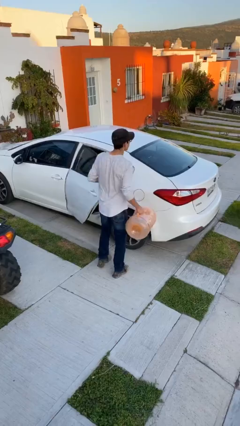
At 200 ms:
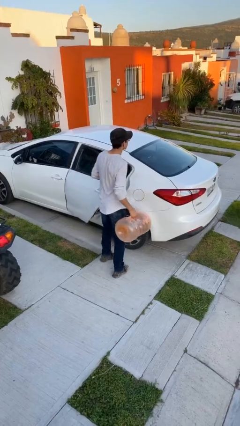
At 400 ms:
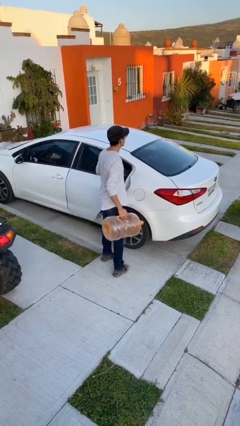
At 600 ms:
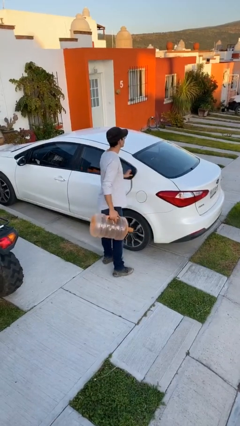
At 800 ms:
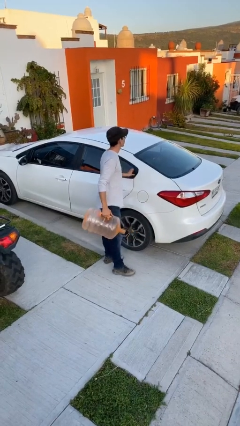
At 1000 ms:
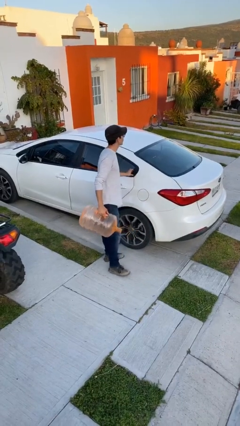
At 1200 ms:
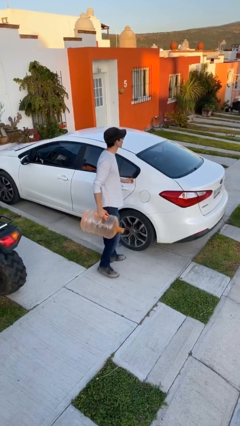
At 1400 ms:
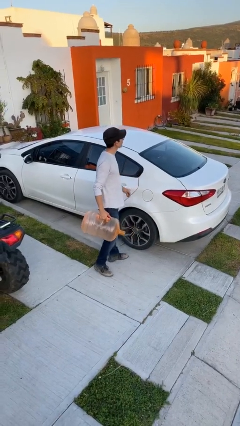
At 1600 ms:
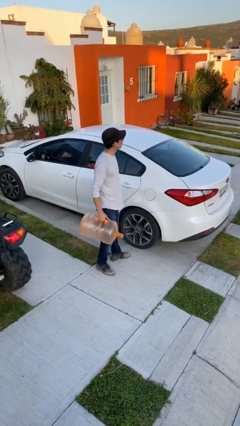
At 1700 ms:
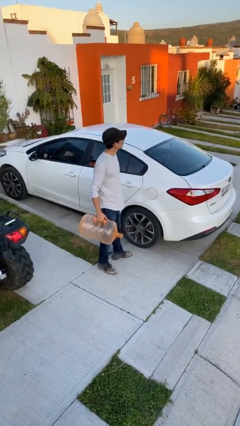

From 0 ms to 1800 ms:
person closes car door

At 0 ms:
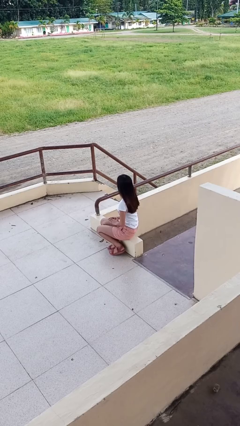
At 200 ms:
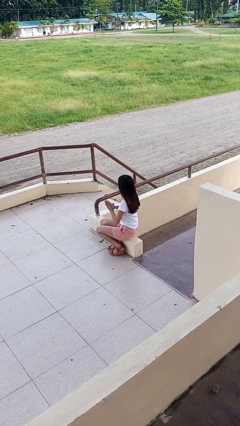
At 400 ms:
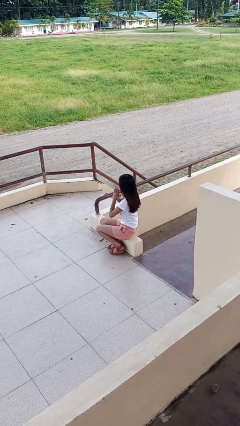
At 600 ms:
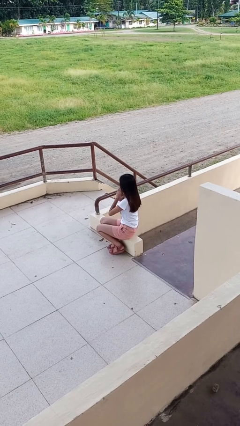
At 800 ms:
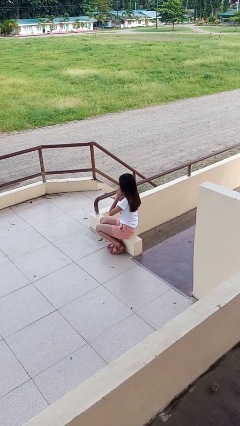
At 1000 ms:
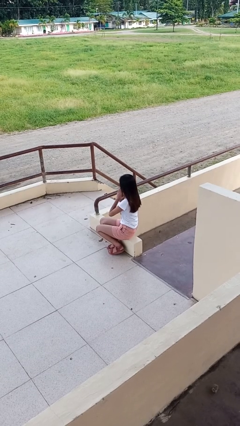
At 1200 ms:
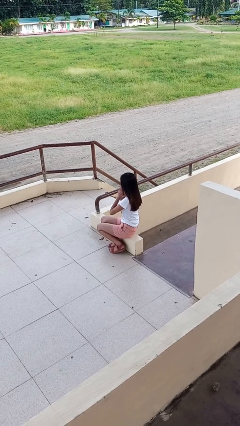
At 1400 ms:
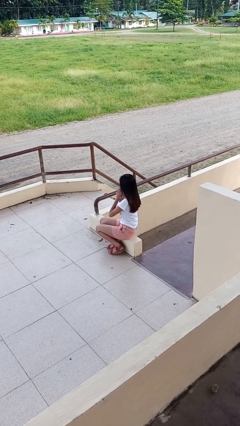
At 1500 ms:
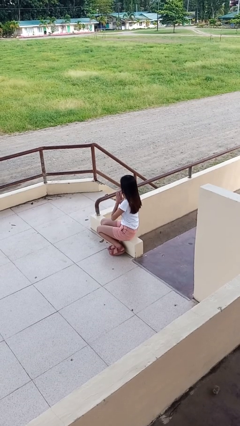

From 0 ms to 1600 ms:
person prays

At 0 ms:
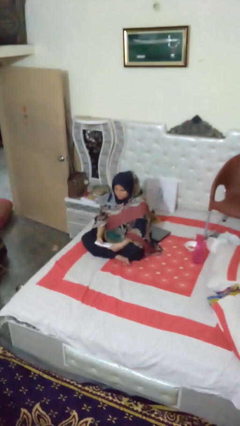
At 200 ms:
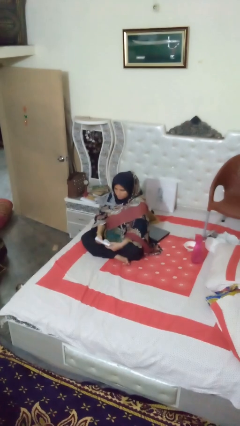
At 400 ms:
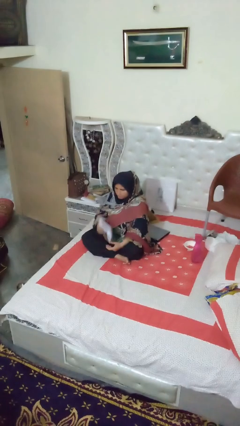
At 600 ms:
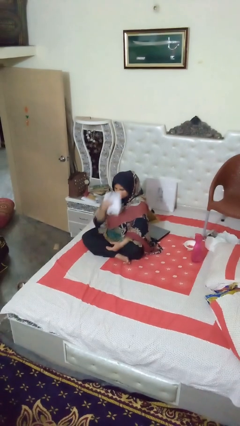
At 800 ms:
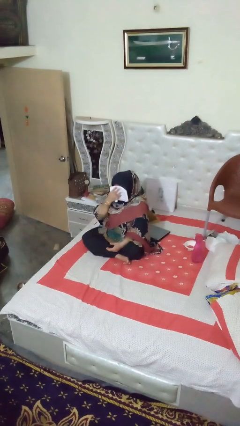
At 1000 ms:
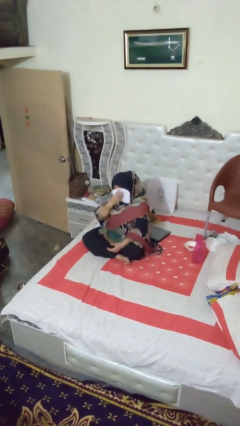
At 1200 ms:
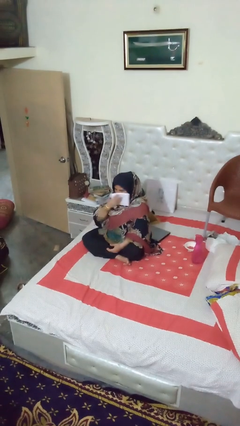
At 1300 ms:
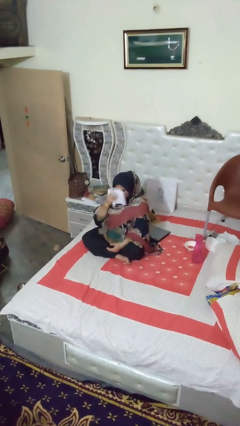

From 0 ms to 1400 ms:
person wipes mouth with napkin

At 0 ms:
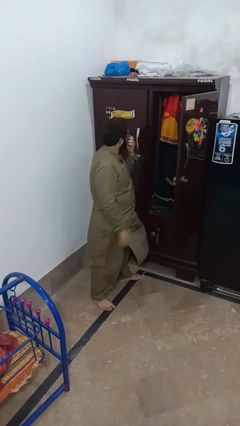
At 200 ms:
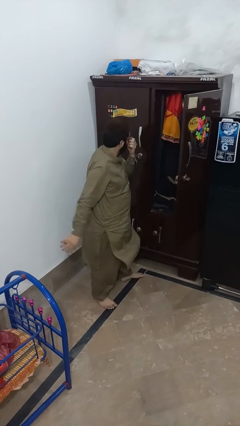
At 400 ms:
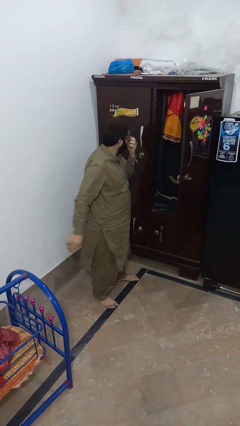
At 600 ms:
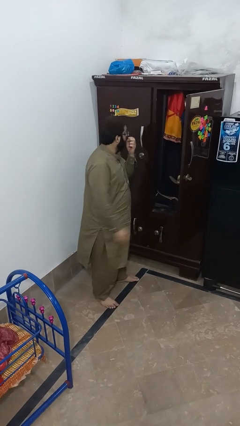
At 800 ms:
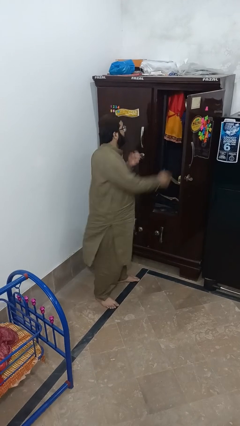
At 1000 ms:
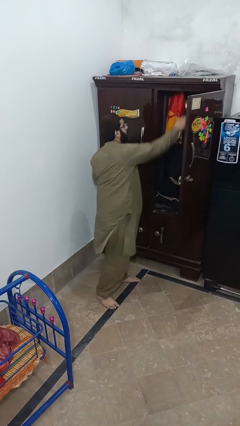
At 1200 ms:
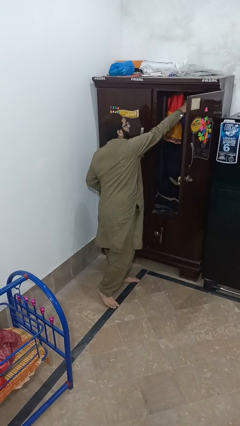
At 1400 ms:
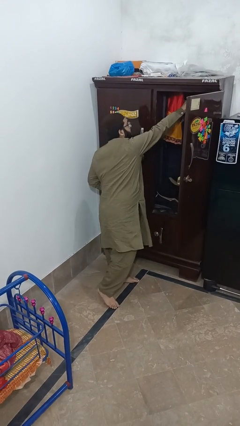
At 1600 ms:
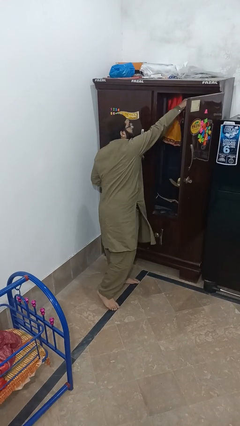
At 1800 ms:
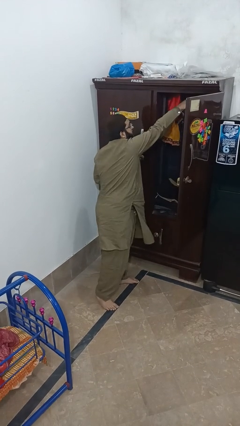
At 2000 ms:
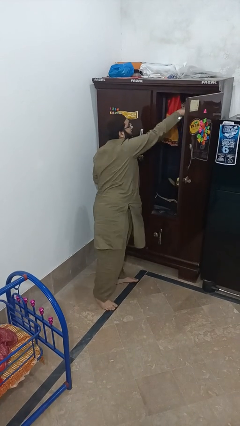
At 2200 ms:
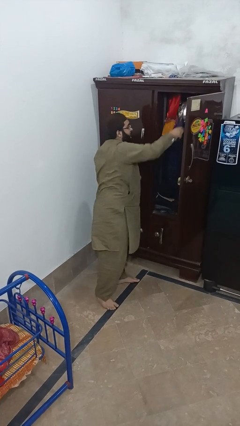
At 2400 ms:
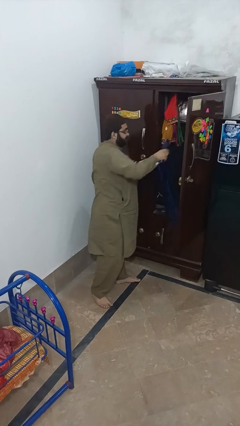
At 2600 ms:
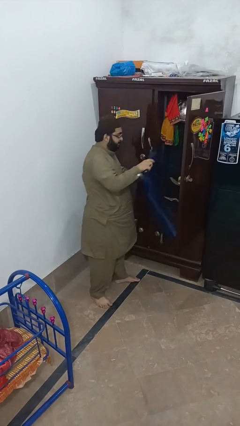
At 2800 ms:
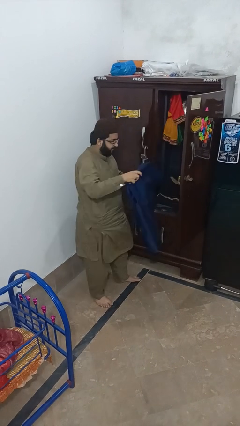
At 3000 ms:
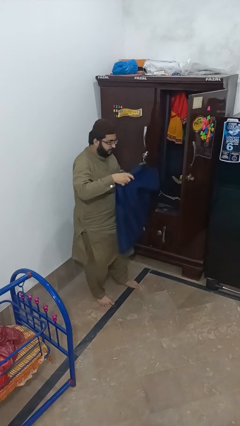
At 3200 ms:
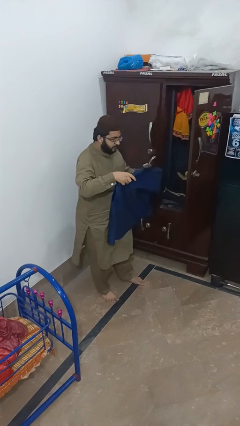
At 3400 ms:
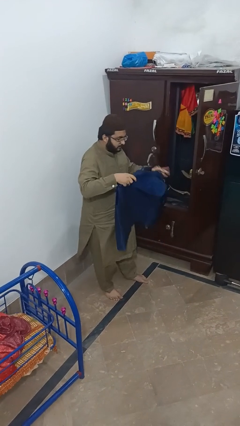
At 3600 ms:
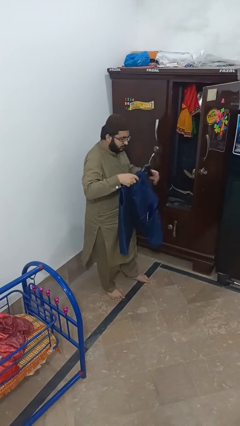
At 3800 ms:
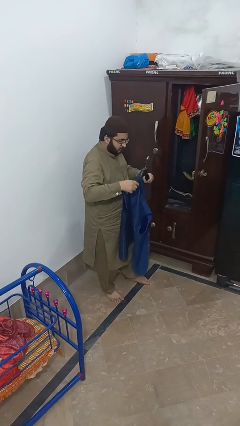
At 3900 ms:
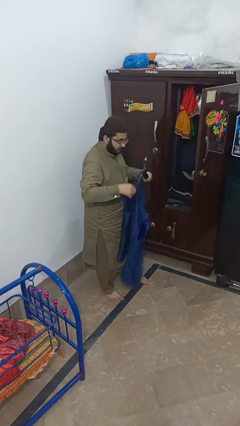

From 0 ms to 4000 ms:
person takes clothes from closet

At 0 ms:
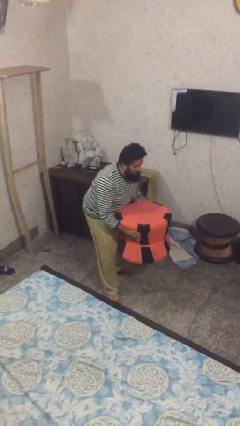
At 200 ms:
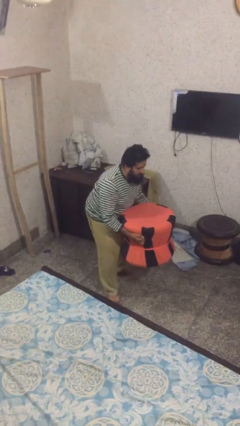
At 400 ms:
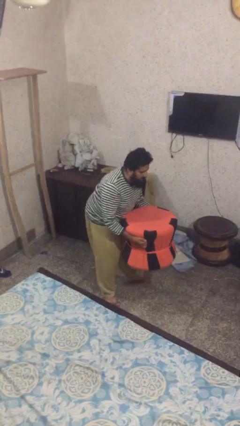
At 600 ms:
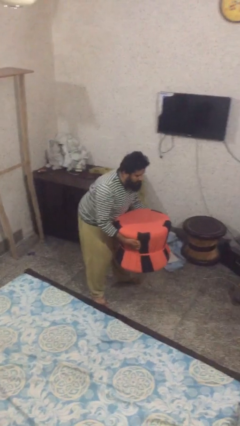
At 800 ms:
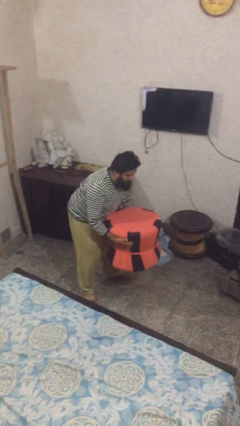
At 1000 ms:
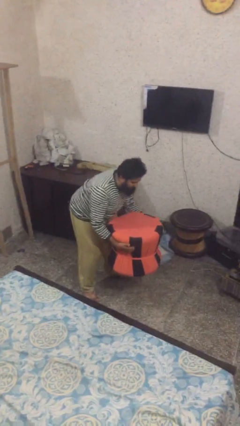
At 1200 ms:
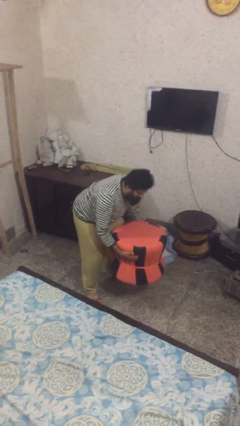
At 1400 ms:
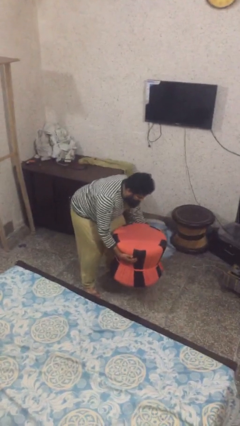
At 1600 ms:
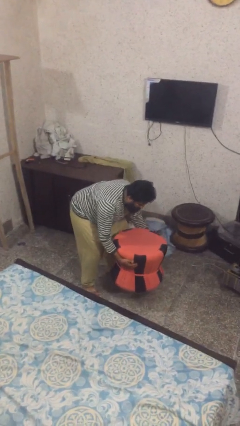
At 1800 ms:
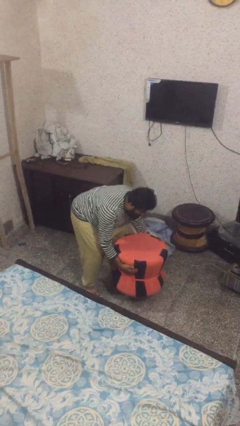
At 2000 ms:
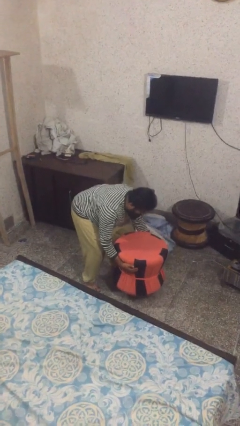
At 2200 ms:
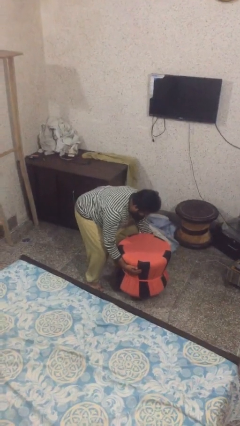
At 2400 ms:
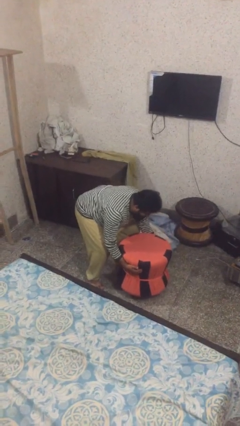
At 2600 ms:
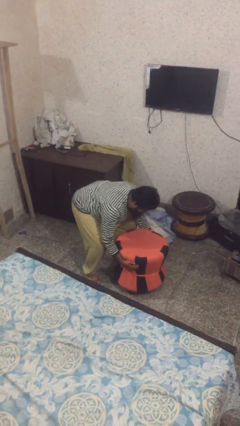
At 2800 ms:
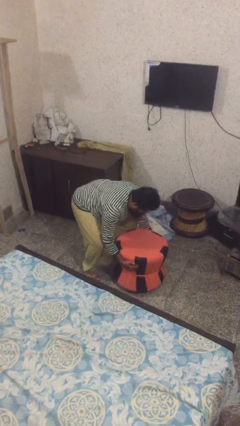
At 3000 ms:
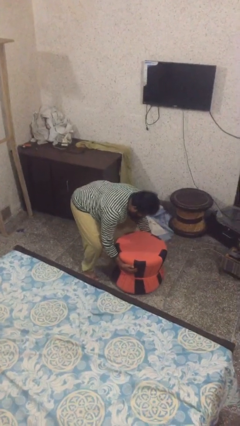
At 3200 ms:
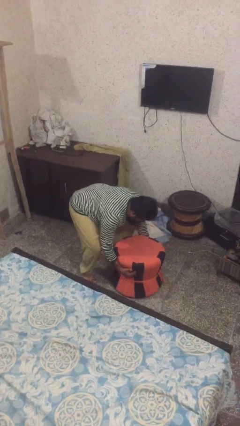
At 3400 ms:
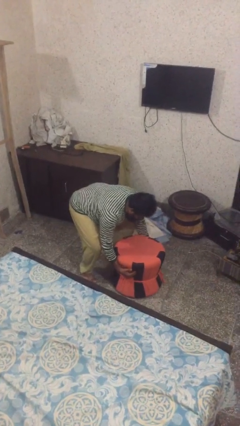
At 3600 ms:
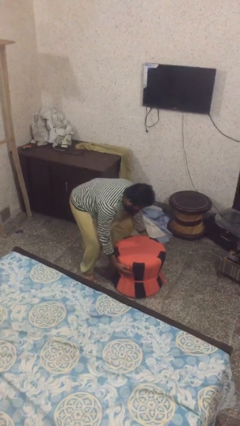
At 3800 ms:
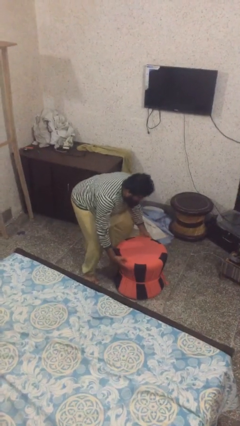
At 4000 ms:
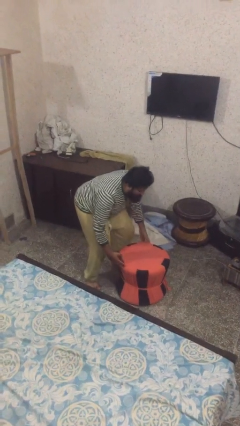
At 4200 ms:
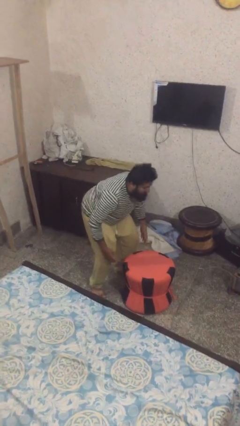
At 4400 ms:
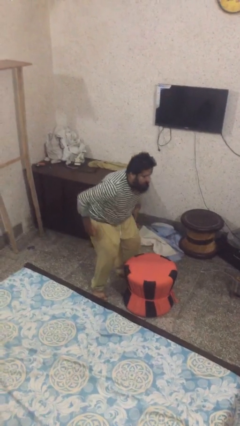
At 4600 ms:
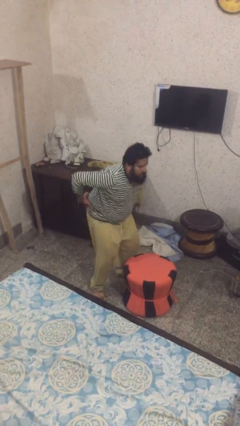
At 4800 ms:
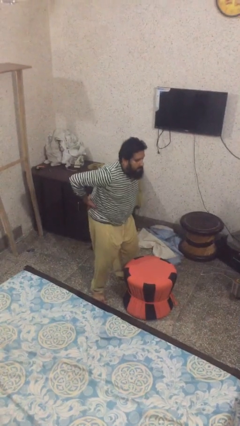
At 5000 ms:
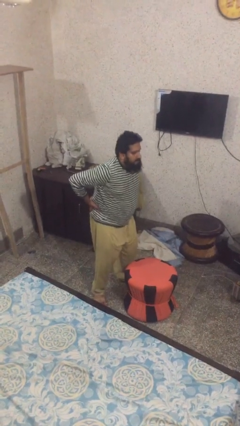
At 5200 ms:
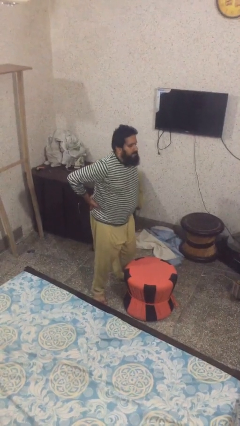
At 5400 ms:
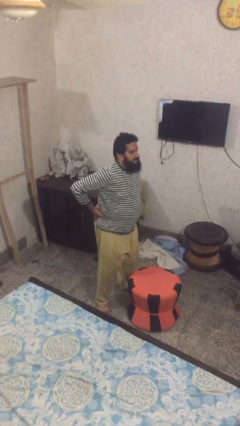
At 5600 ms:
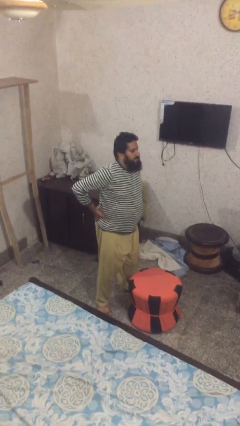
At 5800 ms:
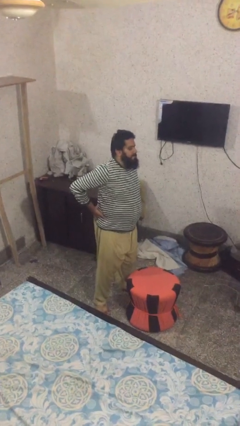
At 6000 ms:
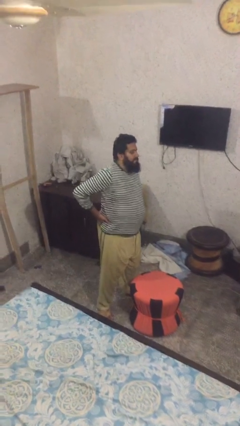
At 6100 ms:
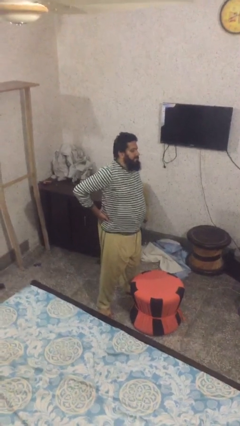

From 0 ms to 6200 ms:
person puts down object on floor

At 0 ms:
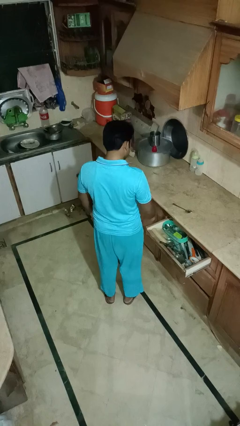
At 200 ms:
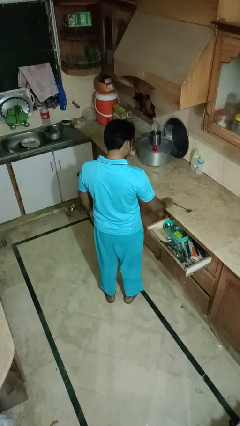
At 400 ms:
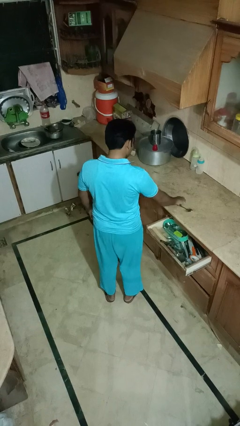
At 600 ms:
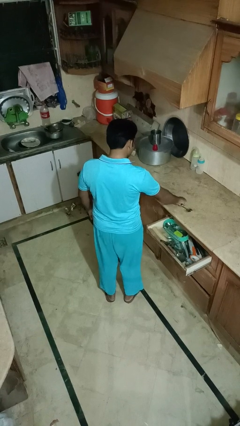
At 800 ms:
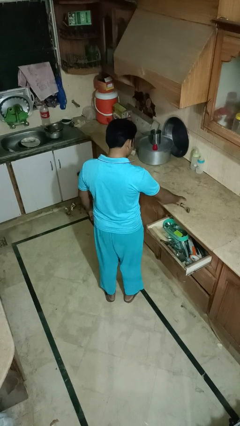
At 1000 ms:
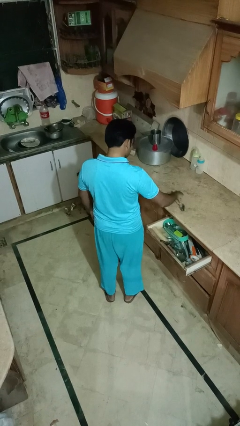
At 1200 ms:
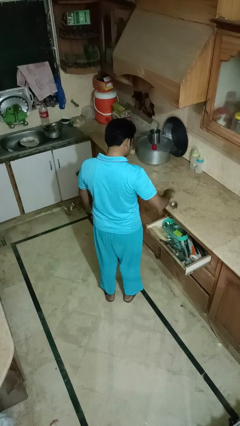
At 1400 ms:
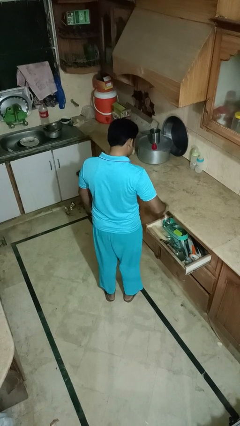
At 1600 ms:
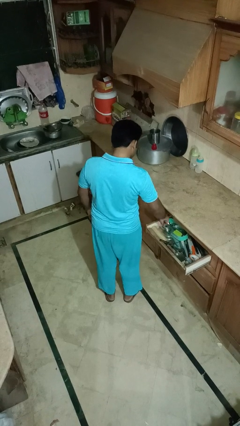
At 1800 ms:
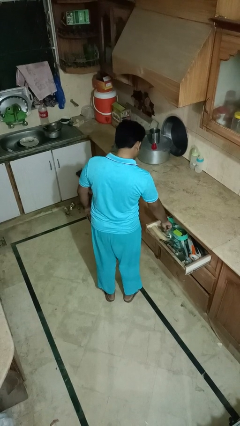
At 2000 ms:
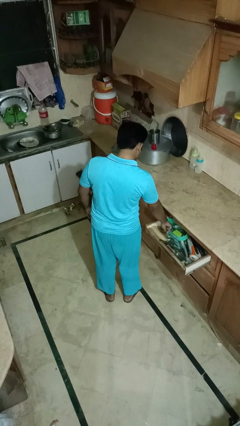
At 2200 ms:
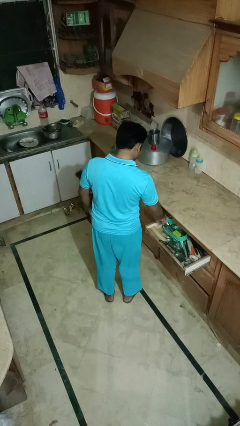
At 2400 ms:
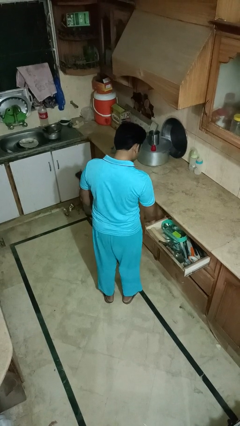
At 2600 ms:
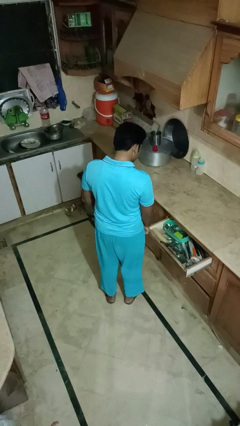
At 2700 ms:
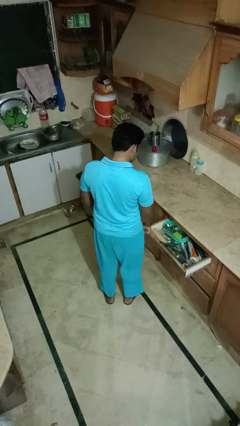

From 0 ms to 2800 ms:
person puts object into kitchen drawer
